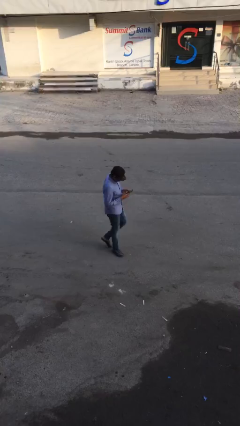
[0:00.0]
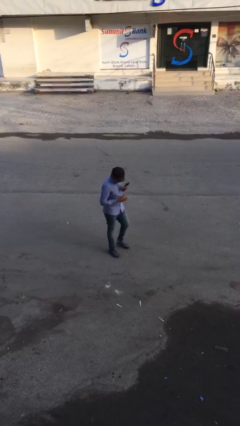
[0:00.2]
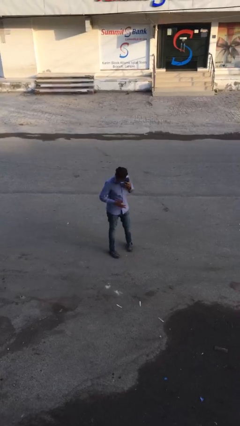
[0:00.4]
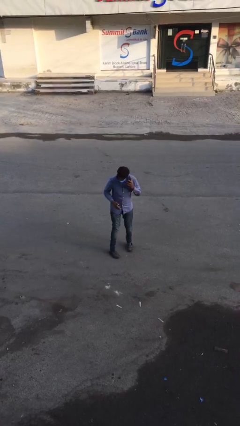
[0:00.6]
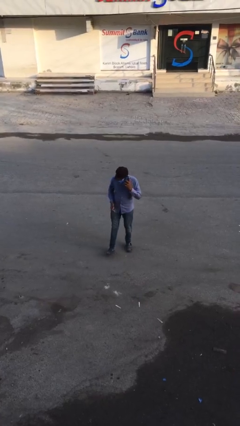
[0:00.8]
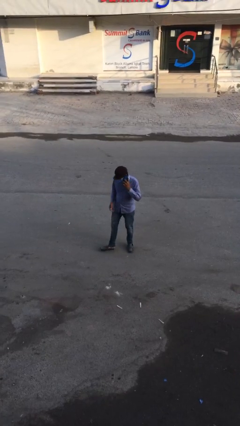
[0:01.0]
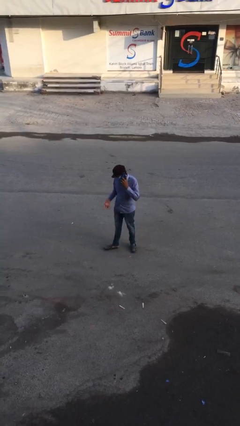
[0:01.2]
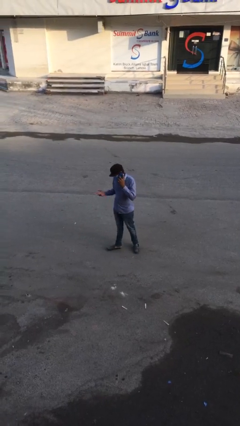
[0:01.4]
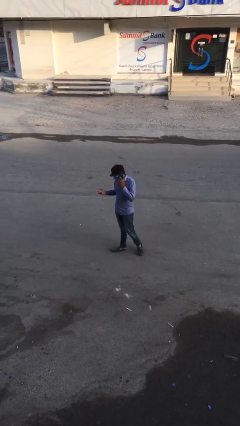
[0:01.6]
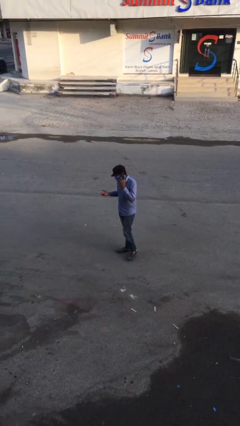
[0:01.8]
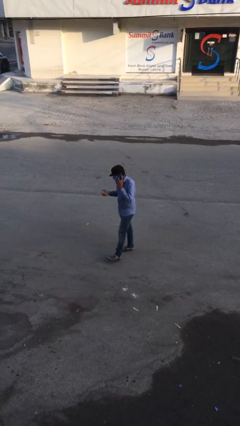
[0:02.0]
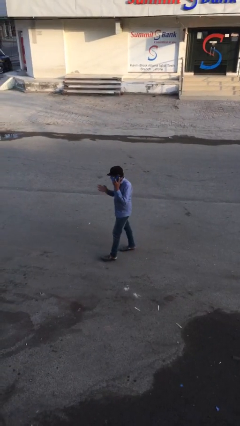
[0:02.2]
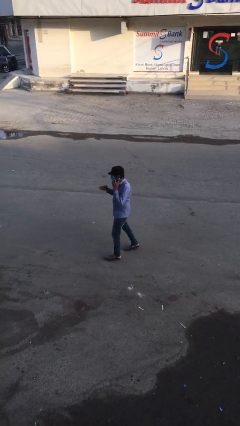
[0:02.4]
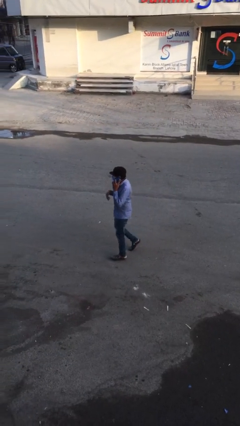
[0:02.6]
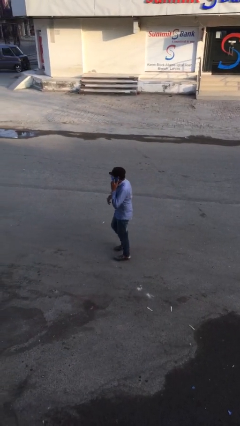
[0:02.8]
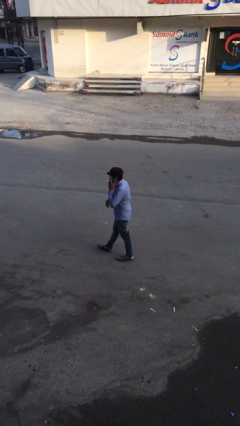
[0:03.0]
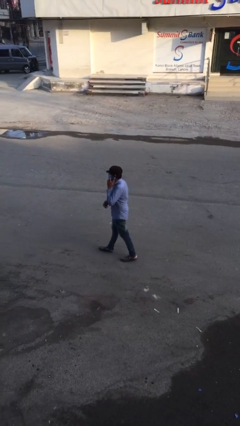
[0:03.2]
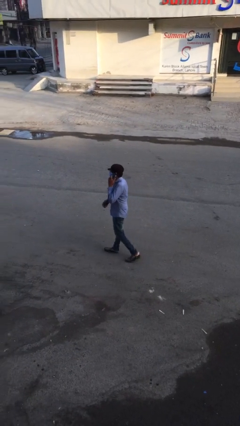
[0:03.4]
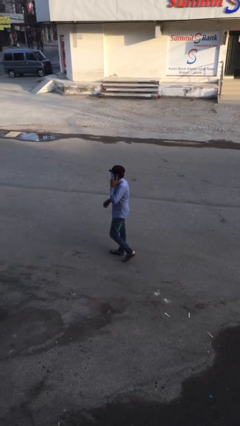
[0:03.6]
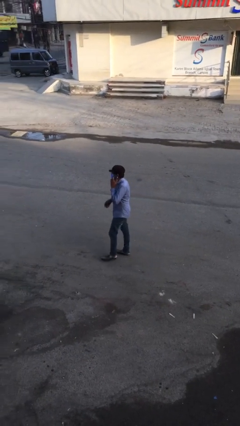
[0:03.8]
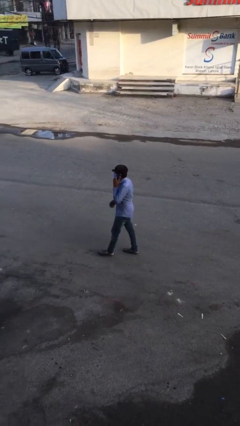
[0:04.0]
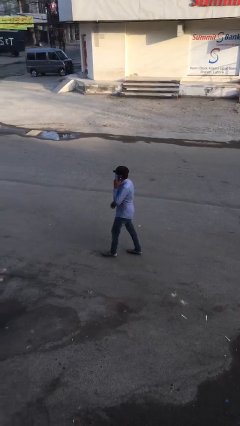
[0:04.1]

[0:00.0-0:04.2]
person talks on phone

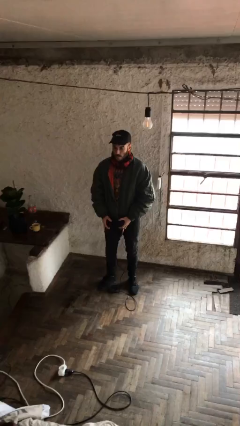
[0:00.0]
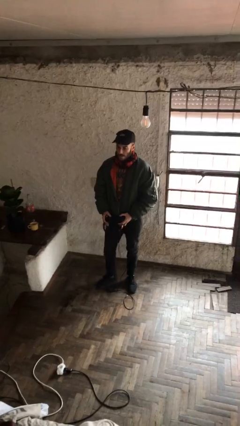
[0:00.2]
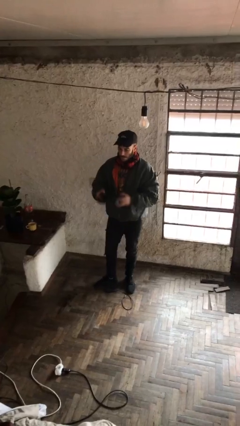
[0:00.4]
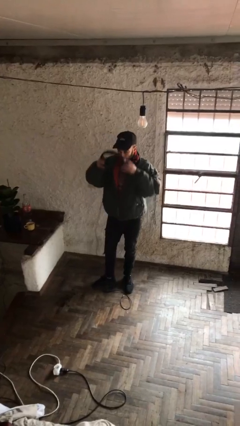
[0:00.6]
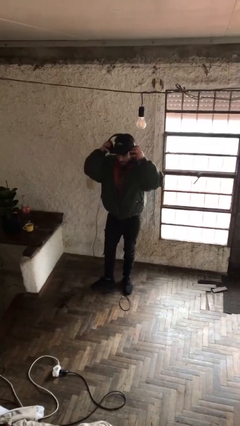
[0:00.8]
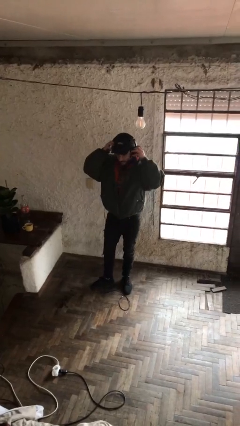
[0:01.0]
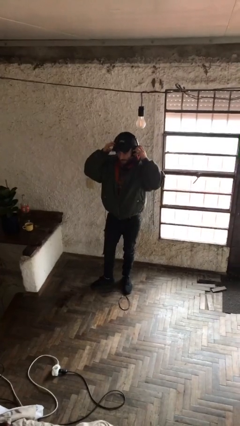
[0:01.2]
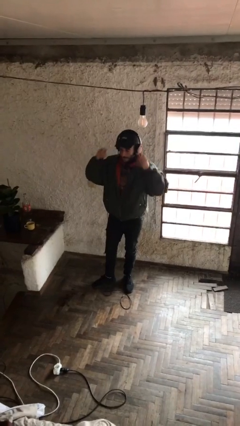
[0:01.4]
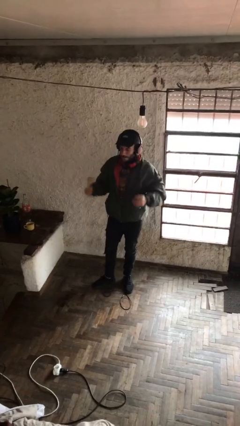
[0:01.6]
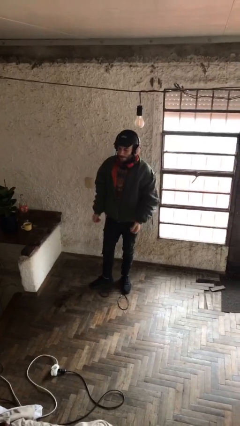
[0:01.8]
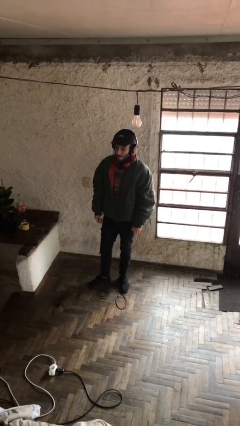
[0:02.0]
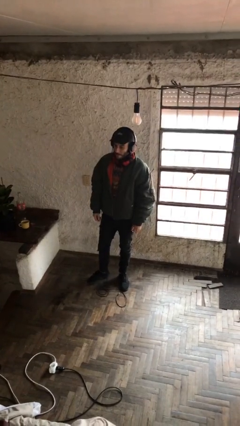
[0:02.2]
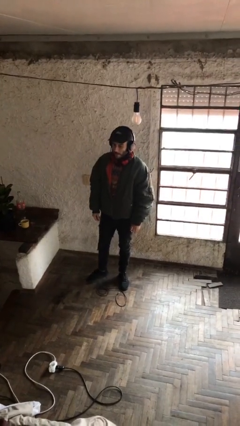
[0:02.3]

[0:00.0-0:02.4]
person puts on headphones

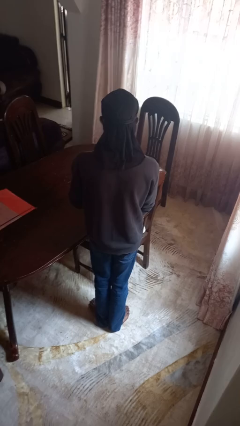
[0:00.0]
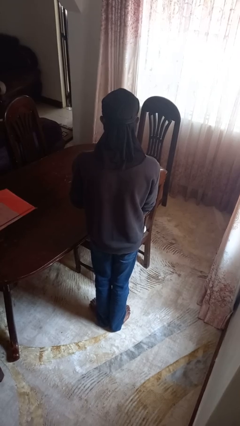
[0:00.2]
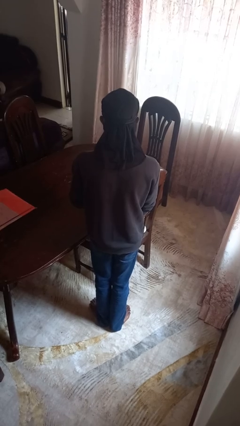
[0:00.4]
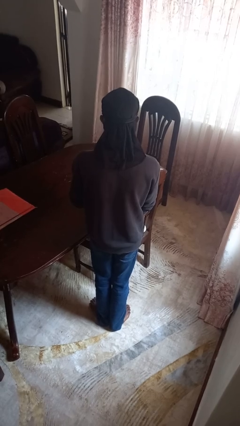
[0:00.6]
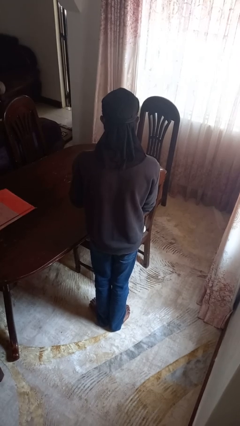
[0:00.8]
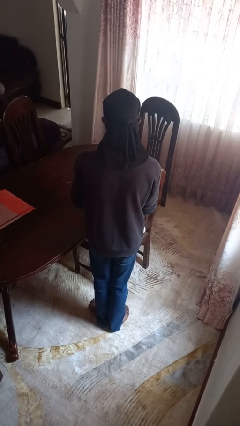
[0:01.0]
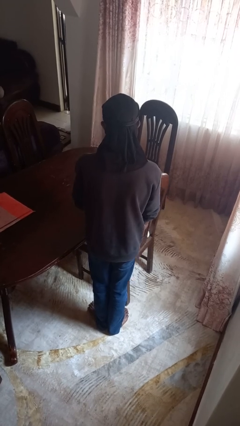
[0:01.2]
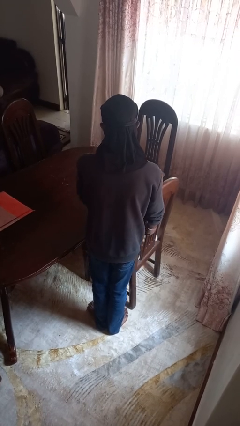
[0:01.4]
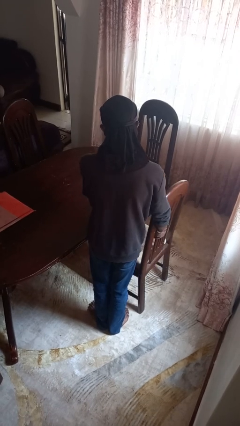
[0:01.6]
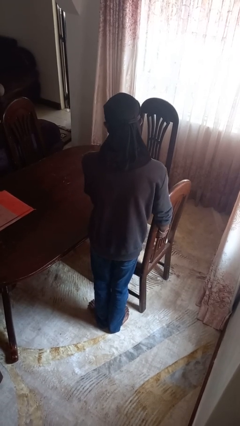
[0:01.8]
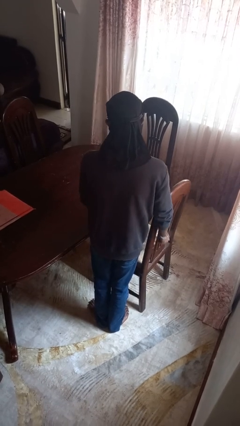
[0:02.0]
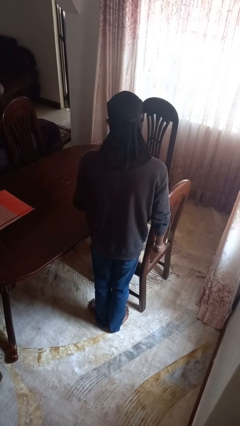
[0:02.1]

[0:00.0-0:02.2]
person pulls out chair

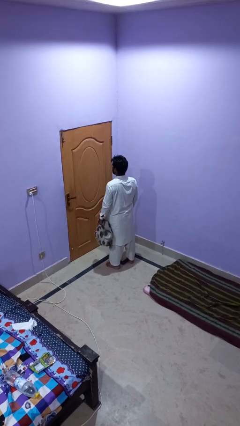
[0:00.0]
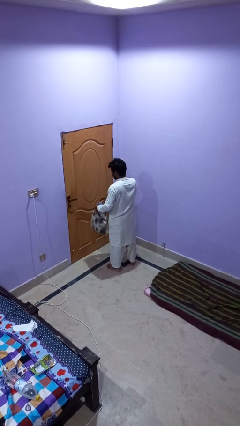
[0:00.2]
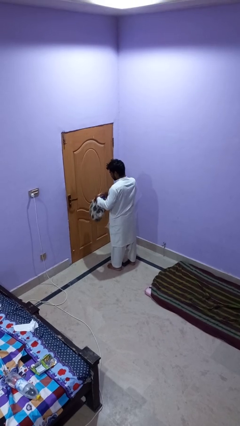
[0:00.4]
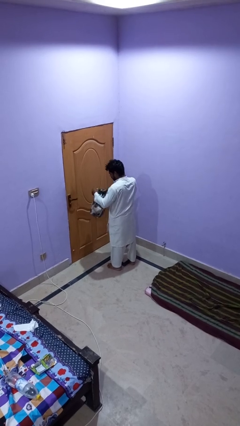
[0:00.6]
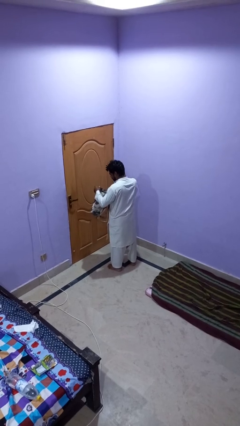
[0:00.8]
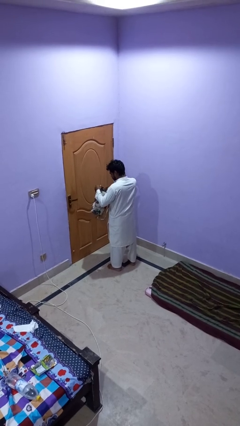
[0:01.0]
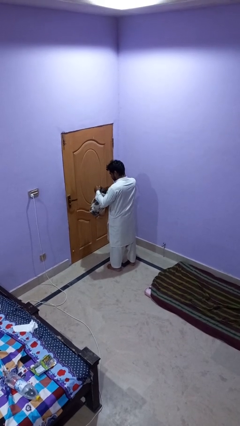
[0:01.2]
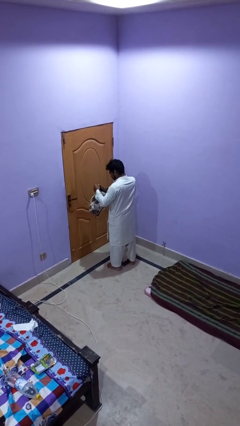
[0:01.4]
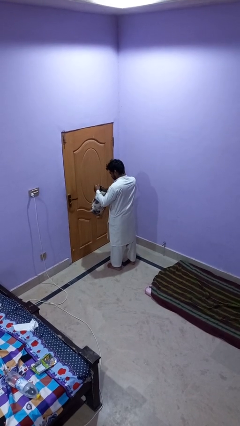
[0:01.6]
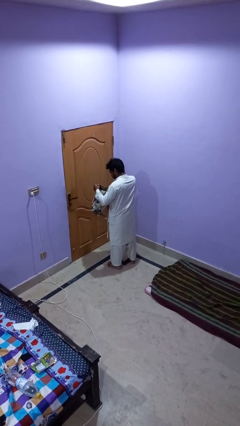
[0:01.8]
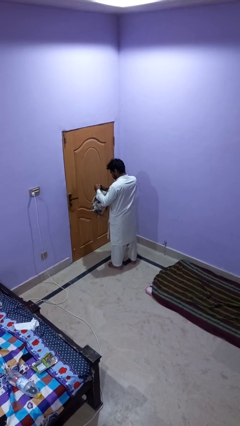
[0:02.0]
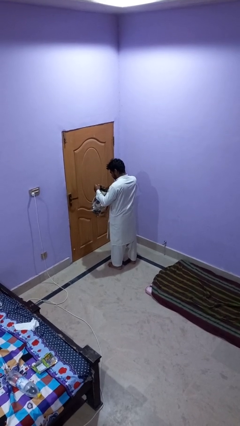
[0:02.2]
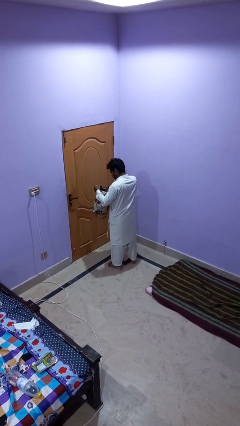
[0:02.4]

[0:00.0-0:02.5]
person searches in backpack

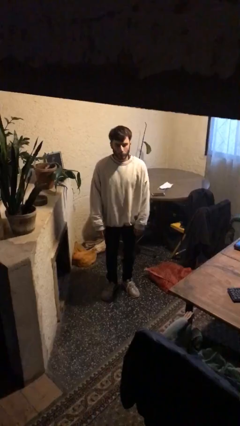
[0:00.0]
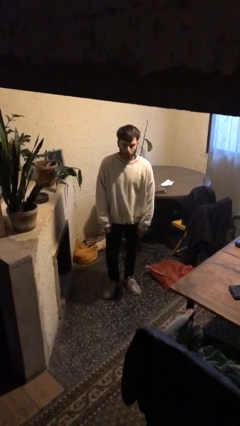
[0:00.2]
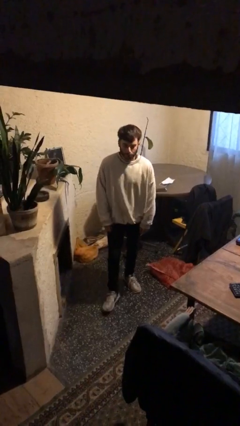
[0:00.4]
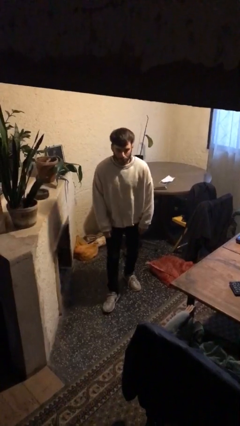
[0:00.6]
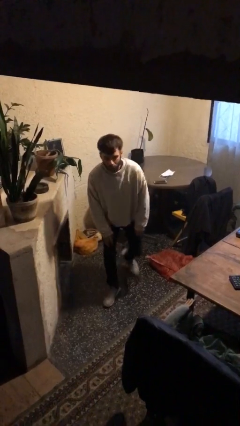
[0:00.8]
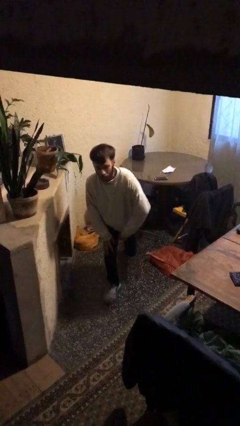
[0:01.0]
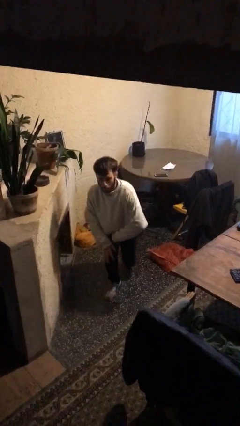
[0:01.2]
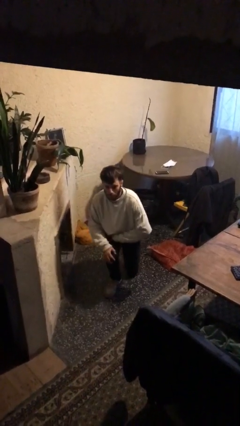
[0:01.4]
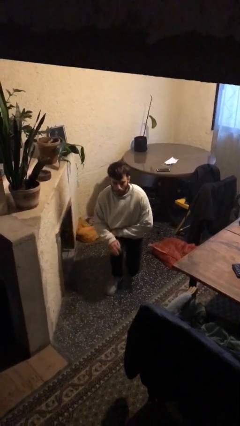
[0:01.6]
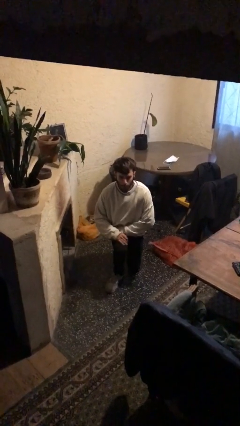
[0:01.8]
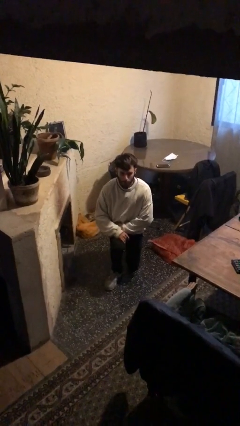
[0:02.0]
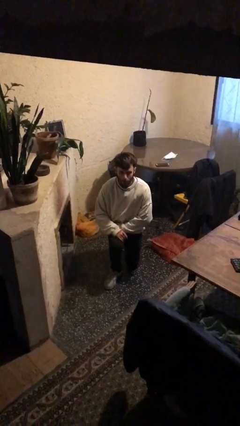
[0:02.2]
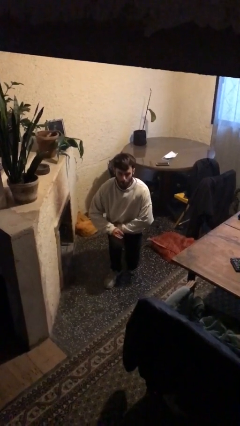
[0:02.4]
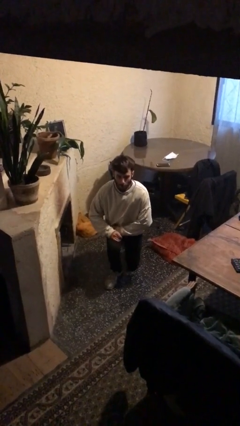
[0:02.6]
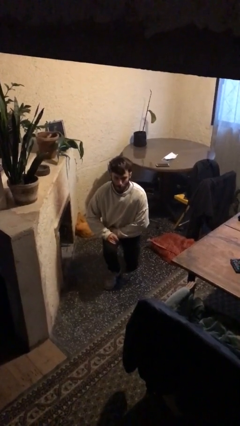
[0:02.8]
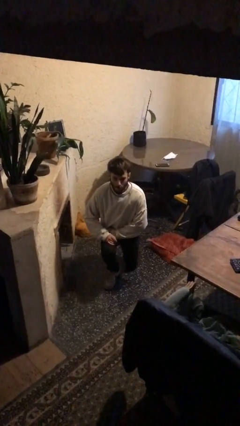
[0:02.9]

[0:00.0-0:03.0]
person kneels

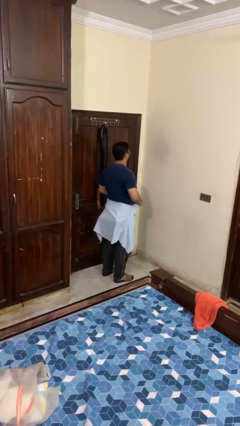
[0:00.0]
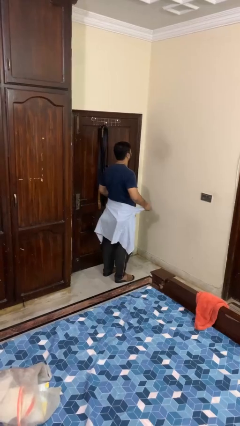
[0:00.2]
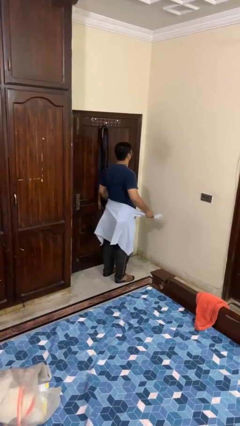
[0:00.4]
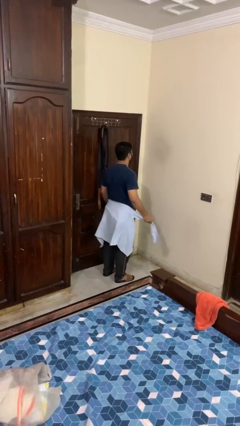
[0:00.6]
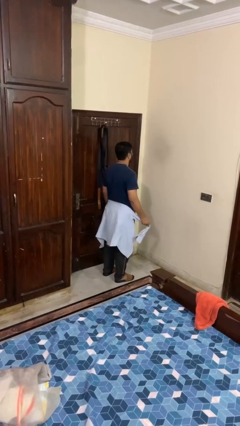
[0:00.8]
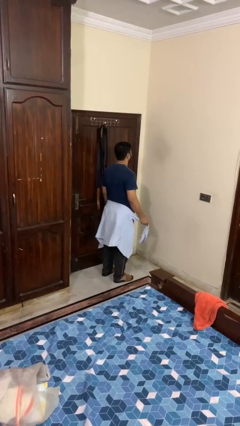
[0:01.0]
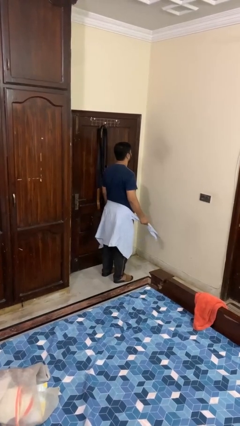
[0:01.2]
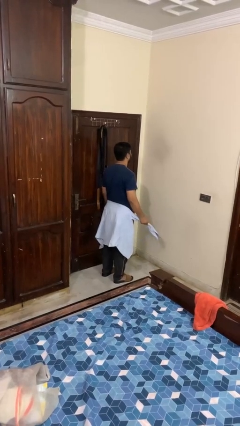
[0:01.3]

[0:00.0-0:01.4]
person unties jacket around waist

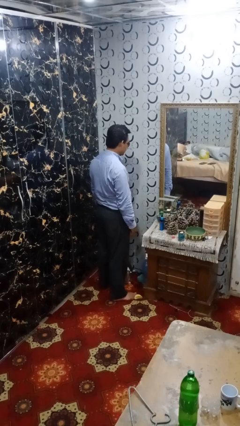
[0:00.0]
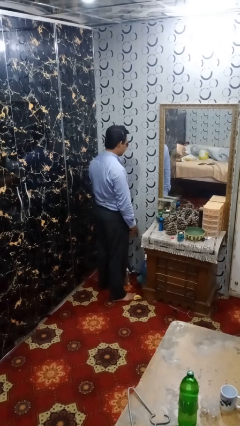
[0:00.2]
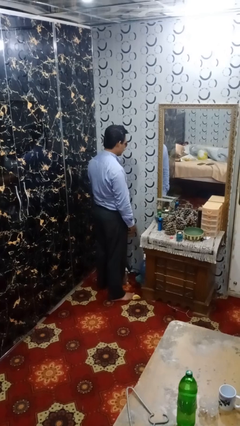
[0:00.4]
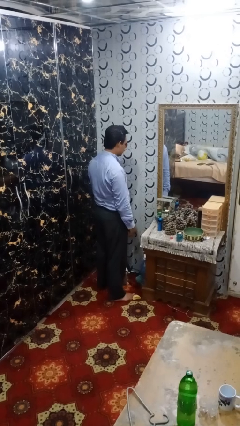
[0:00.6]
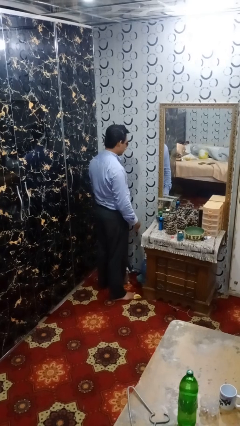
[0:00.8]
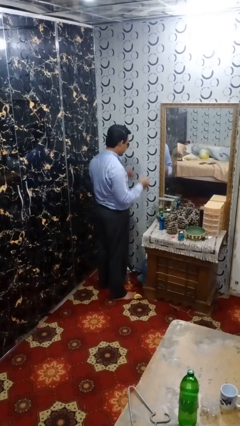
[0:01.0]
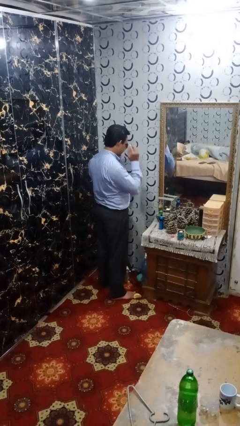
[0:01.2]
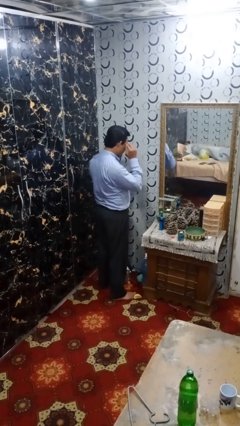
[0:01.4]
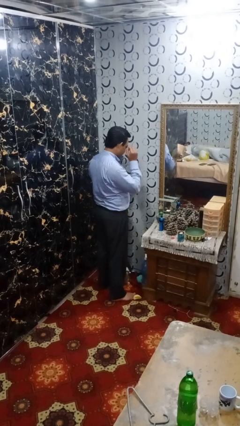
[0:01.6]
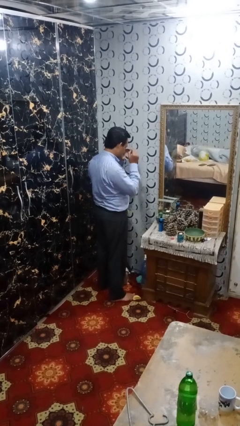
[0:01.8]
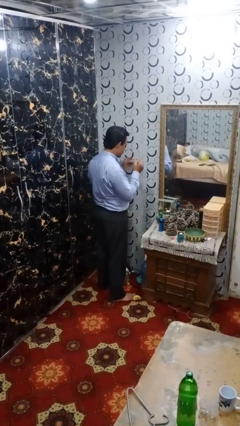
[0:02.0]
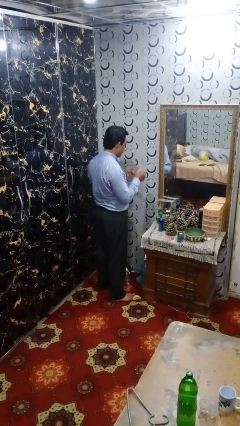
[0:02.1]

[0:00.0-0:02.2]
person takes off sunglasses
